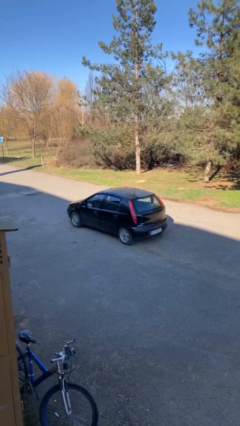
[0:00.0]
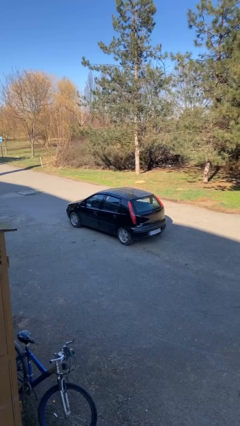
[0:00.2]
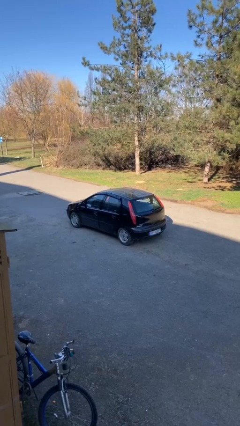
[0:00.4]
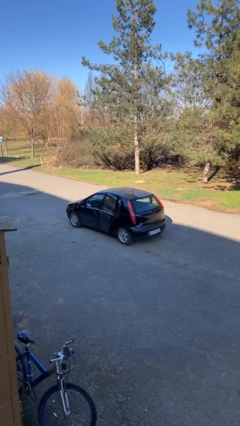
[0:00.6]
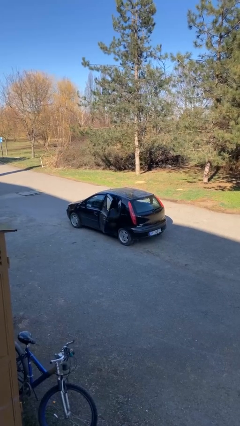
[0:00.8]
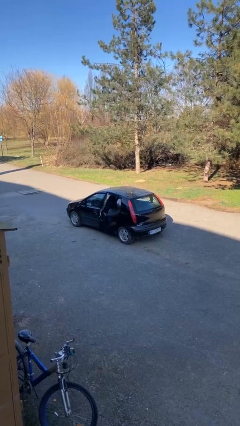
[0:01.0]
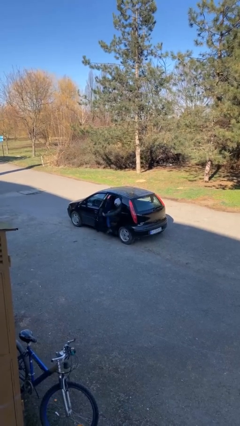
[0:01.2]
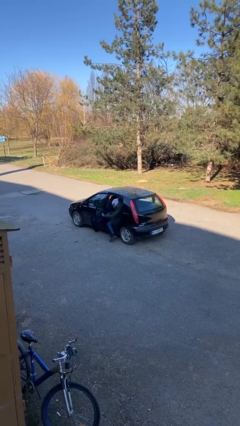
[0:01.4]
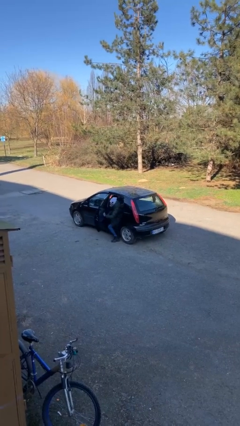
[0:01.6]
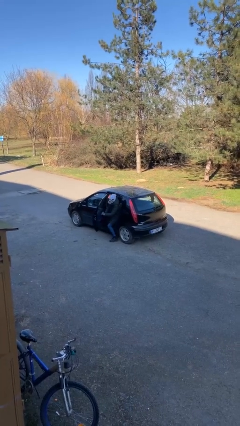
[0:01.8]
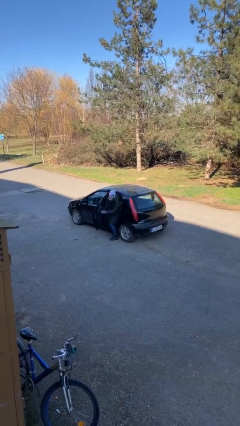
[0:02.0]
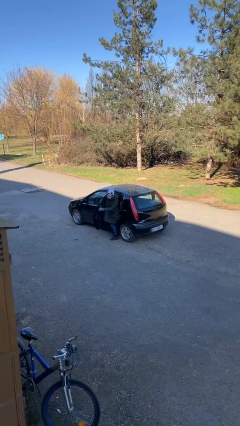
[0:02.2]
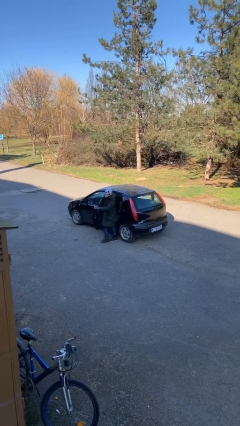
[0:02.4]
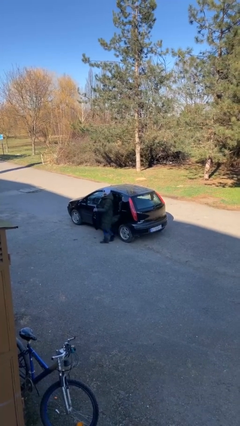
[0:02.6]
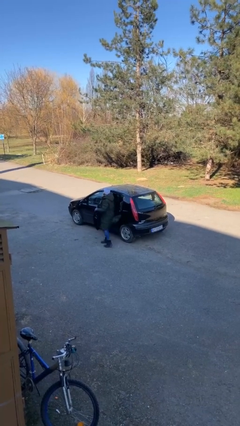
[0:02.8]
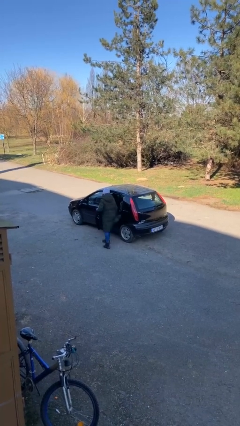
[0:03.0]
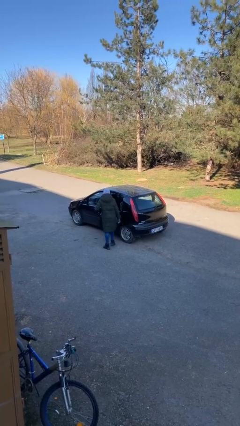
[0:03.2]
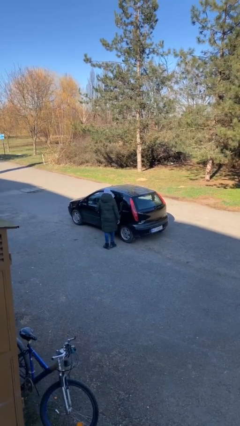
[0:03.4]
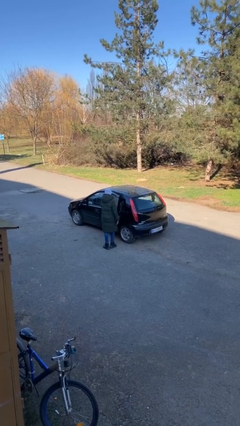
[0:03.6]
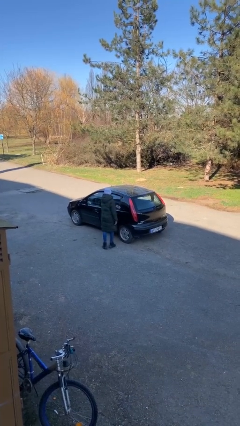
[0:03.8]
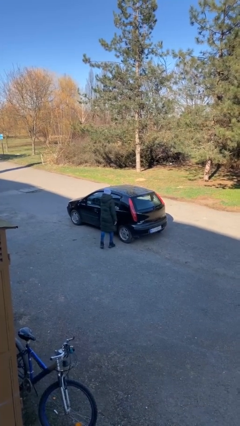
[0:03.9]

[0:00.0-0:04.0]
car drops off person

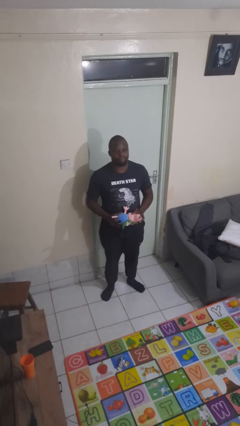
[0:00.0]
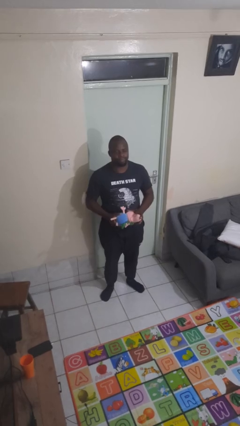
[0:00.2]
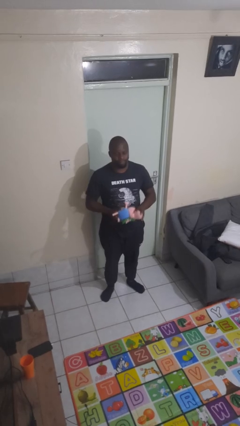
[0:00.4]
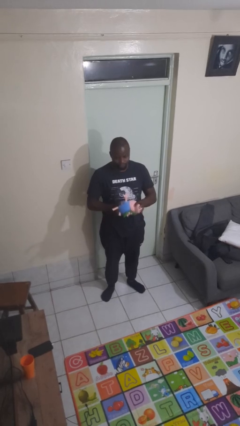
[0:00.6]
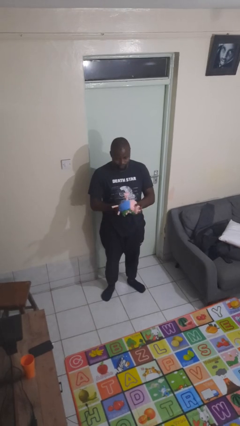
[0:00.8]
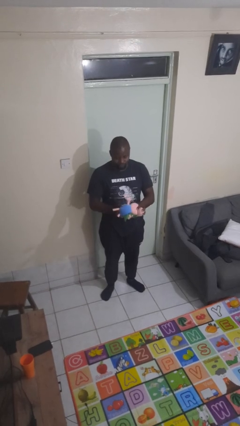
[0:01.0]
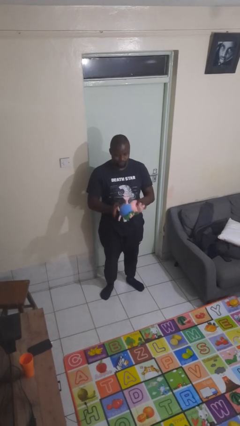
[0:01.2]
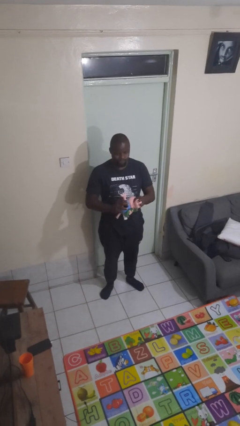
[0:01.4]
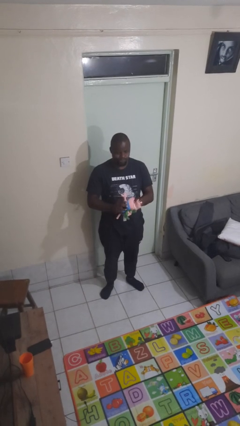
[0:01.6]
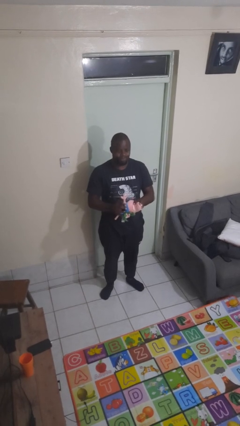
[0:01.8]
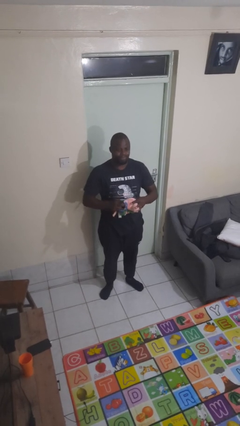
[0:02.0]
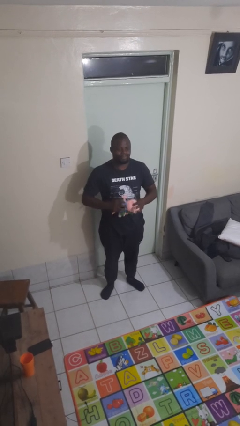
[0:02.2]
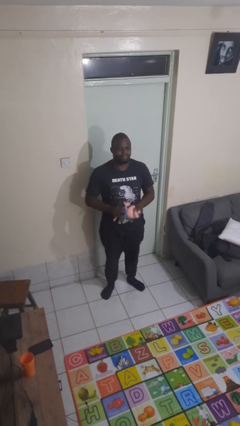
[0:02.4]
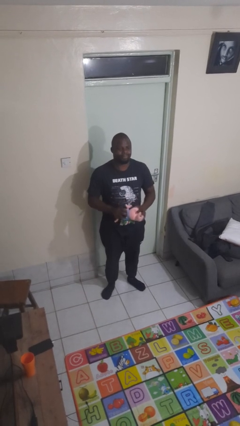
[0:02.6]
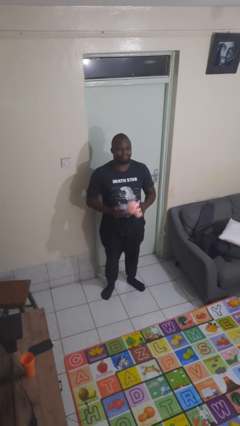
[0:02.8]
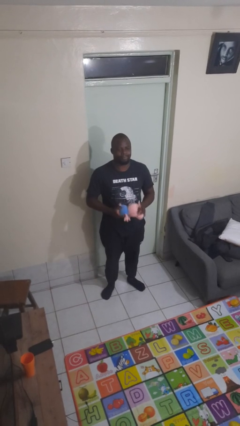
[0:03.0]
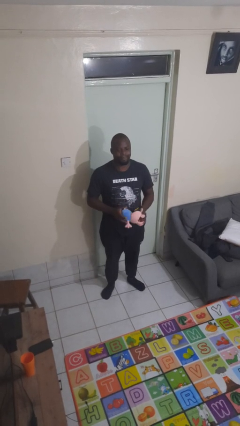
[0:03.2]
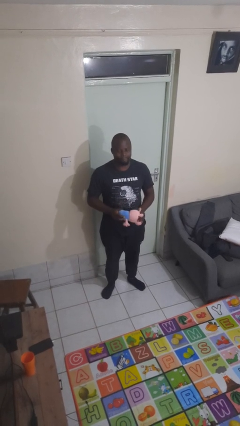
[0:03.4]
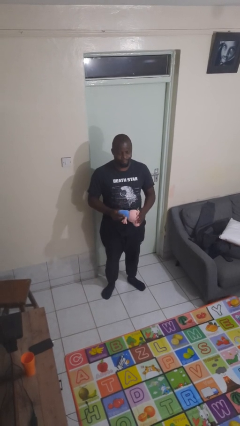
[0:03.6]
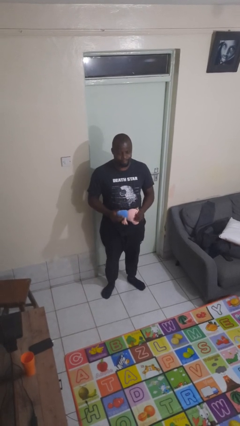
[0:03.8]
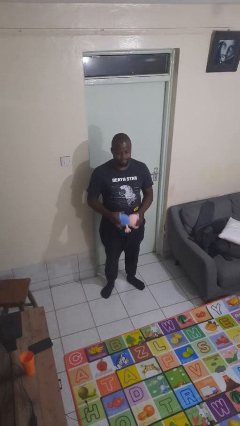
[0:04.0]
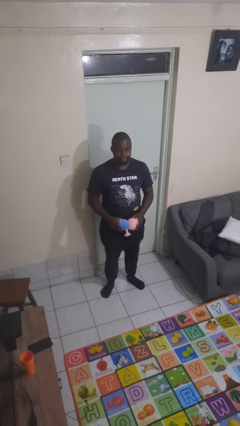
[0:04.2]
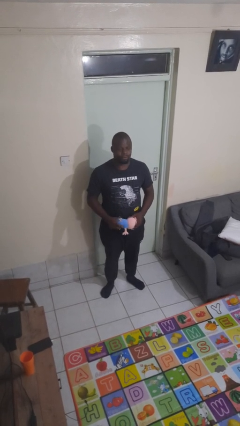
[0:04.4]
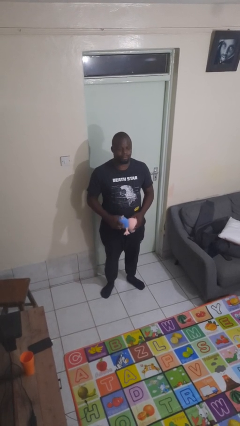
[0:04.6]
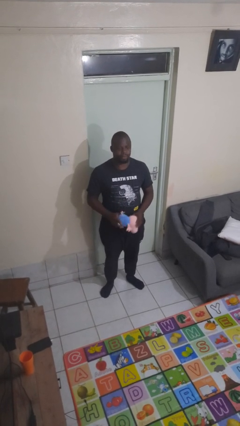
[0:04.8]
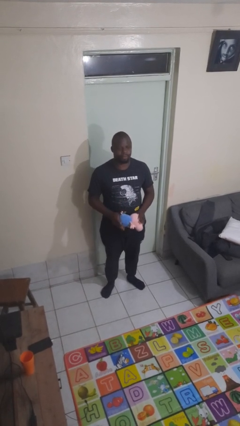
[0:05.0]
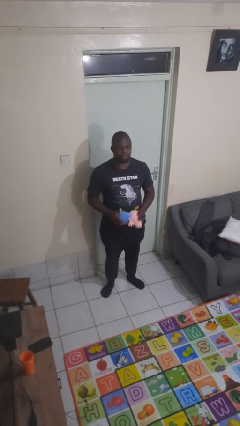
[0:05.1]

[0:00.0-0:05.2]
person squeezes object

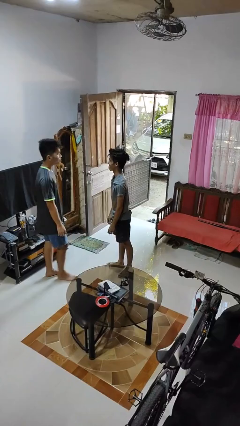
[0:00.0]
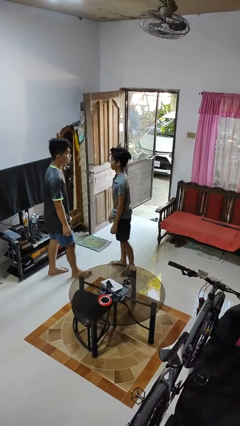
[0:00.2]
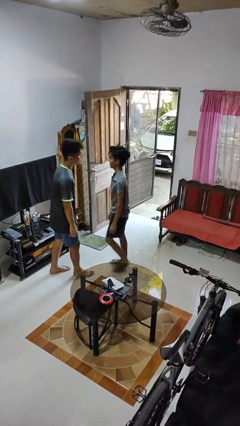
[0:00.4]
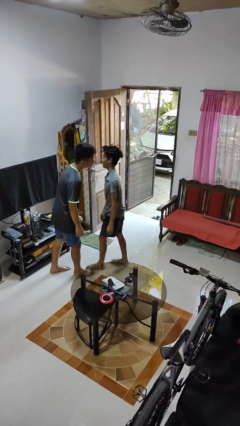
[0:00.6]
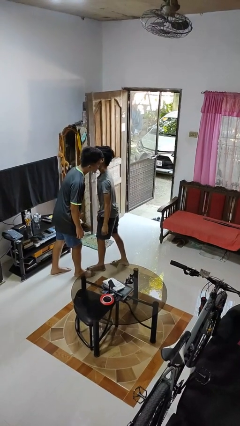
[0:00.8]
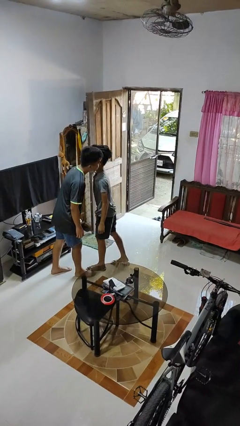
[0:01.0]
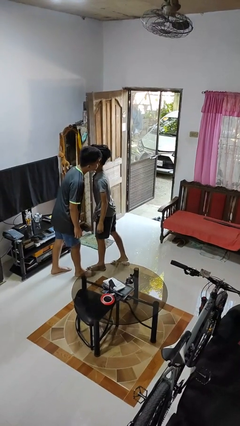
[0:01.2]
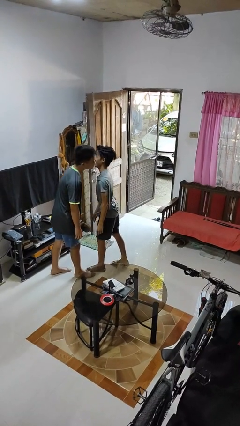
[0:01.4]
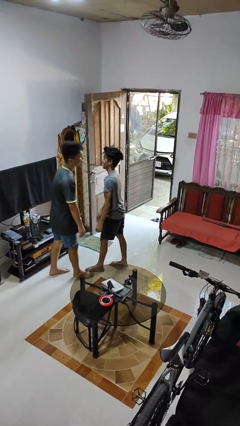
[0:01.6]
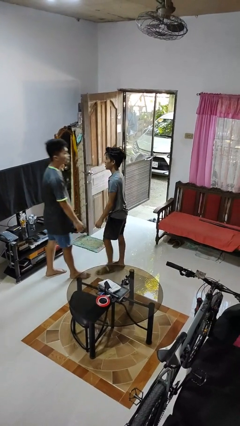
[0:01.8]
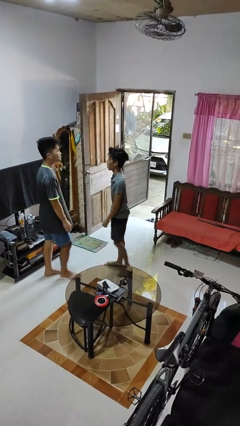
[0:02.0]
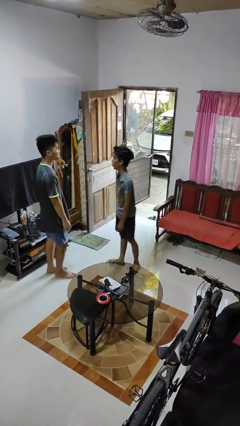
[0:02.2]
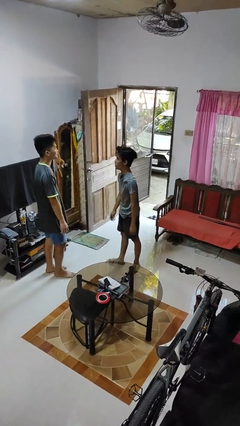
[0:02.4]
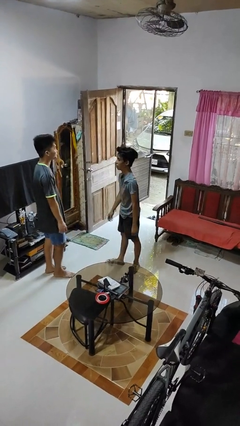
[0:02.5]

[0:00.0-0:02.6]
person kisses cheek of person

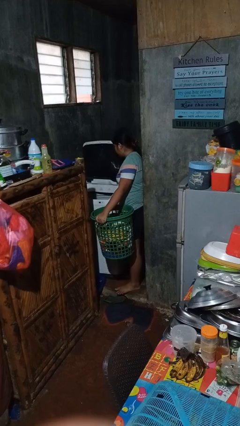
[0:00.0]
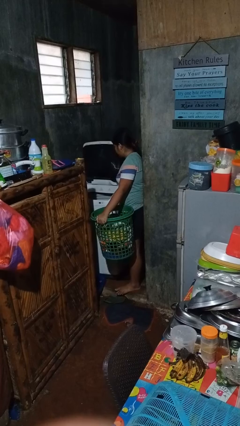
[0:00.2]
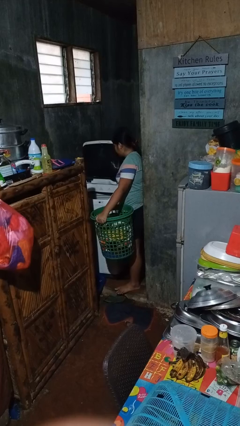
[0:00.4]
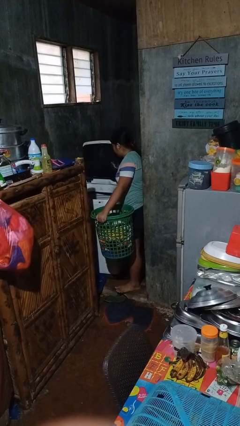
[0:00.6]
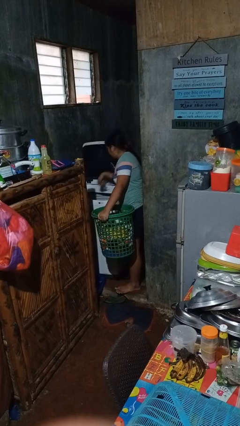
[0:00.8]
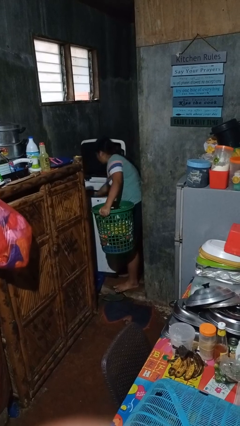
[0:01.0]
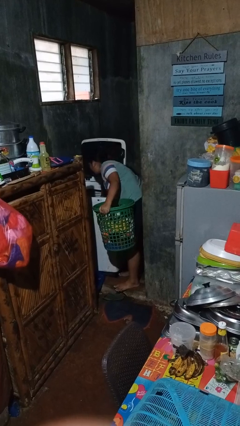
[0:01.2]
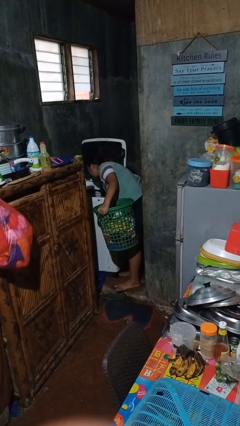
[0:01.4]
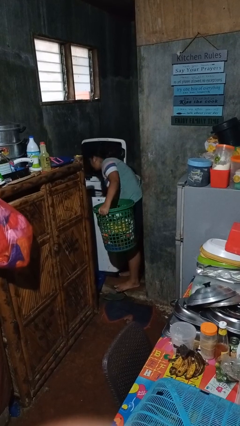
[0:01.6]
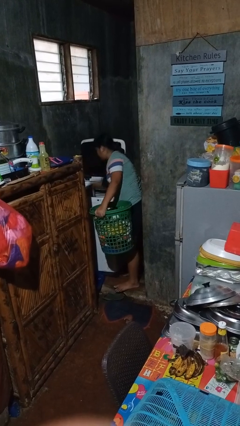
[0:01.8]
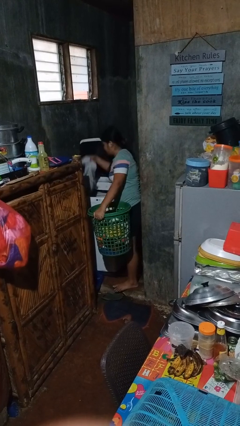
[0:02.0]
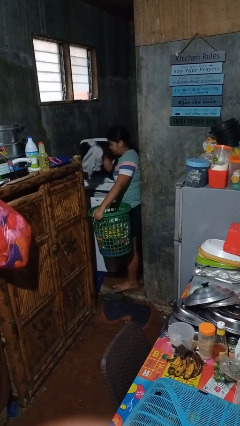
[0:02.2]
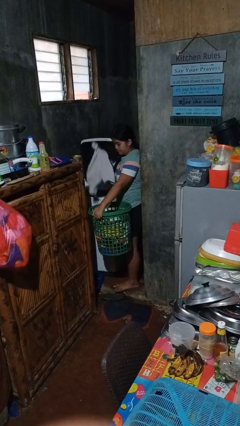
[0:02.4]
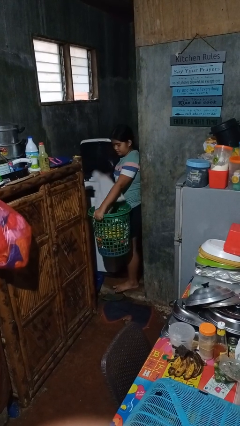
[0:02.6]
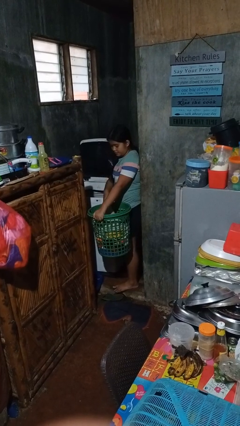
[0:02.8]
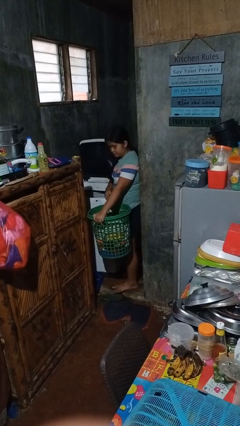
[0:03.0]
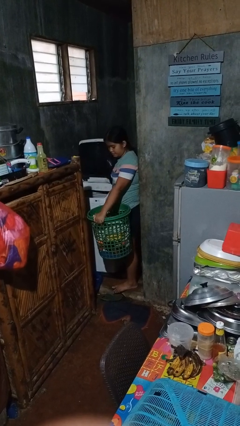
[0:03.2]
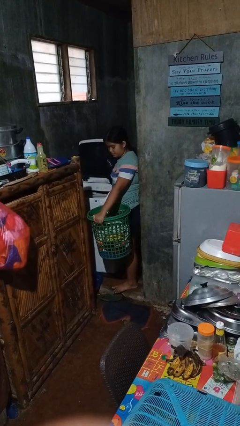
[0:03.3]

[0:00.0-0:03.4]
person unloads clotheswasher

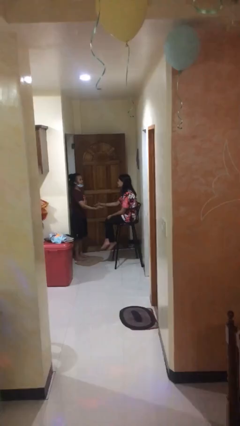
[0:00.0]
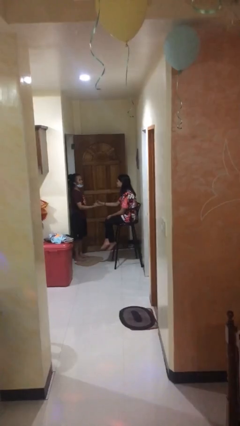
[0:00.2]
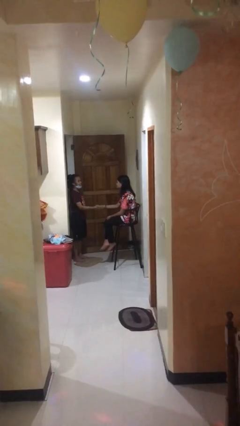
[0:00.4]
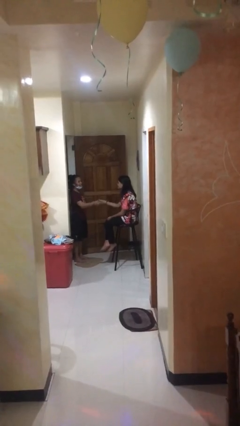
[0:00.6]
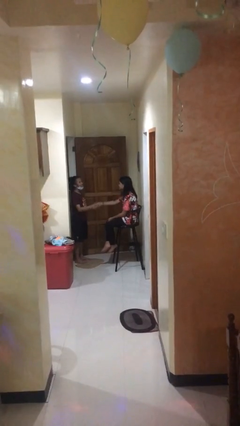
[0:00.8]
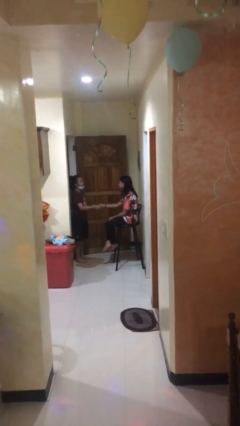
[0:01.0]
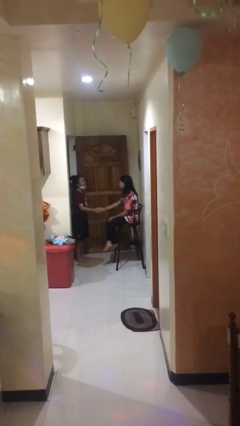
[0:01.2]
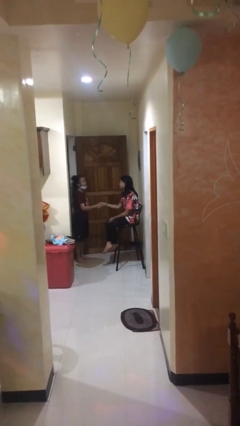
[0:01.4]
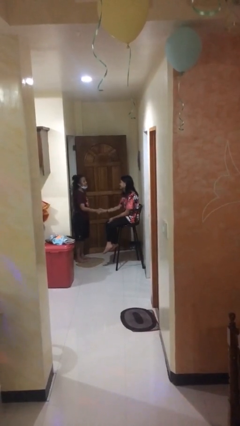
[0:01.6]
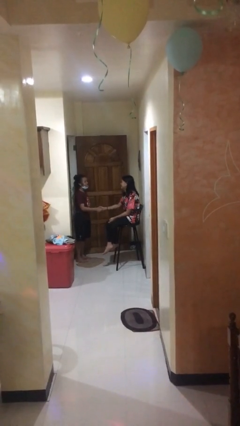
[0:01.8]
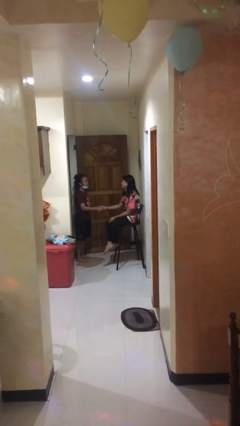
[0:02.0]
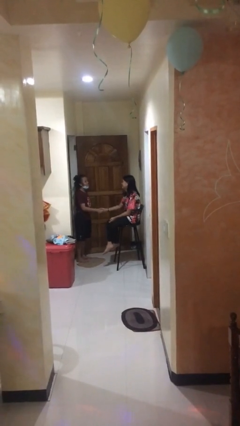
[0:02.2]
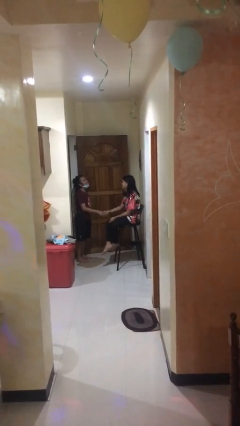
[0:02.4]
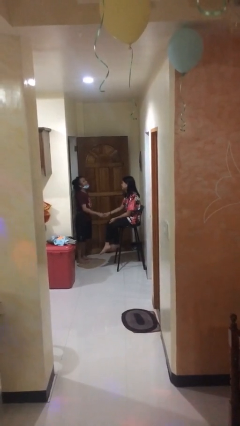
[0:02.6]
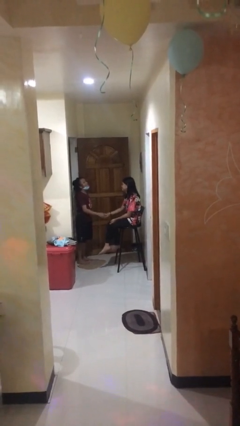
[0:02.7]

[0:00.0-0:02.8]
person shakes hand
